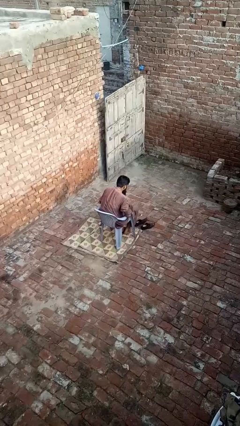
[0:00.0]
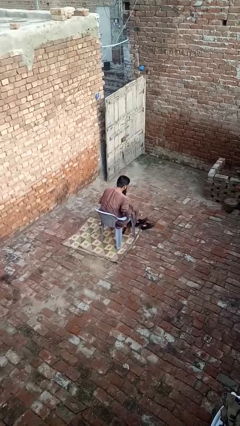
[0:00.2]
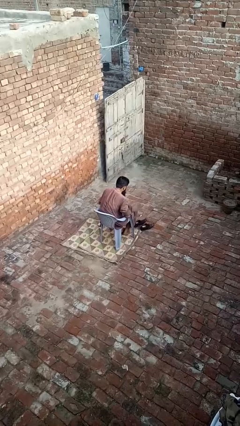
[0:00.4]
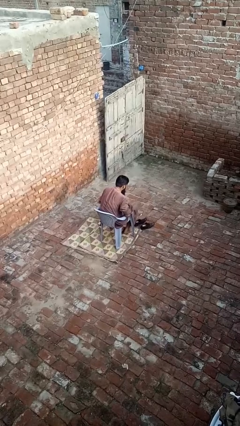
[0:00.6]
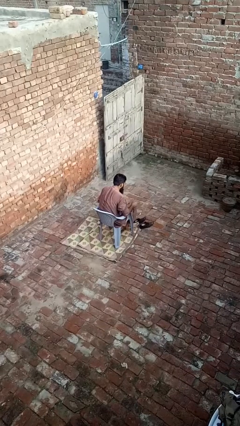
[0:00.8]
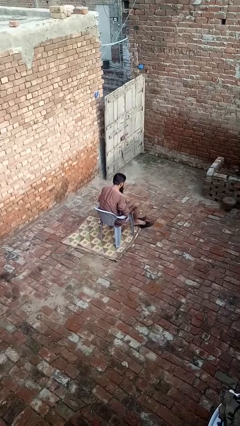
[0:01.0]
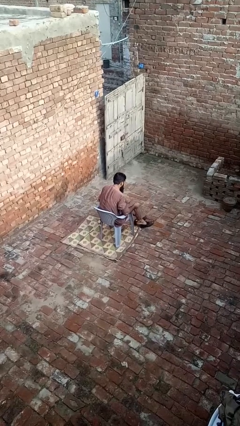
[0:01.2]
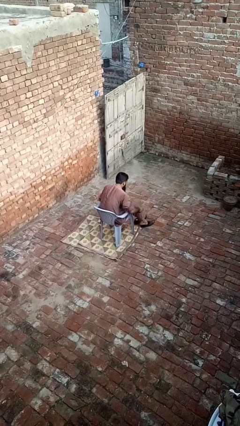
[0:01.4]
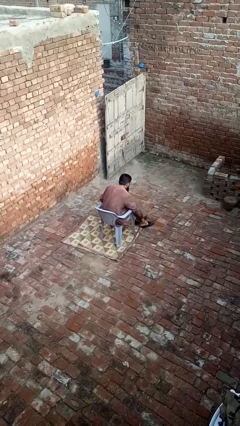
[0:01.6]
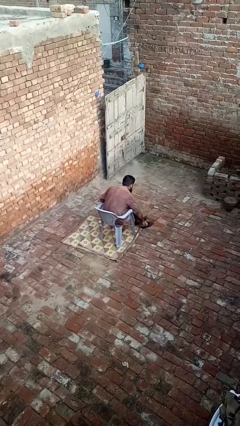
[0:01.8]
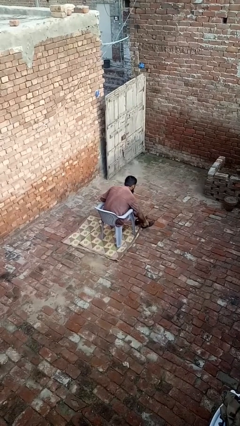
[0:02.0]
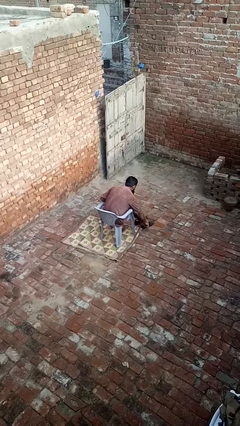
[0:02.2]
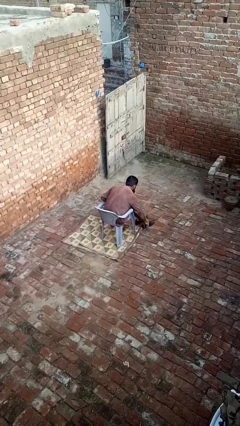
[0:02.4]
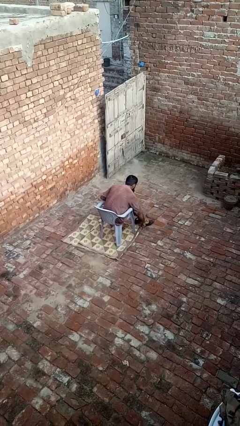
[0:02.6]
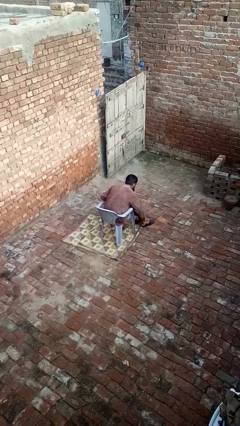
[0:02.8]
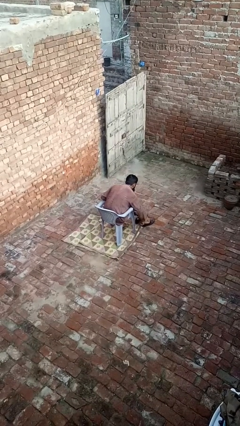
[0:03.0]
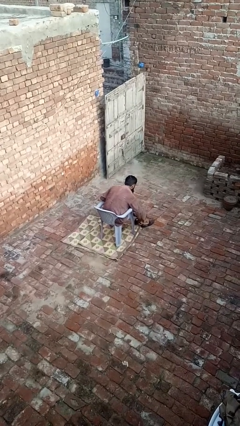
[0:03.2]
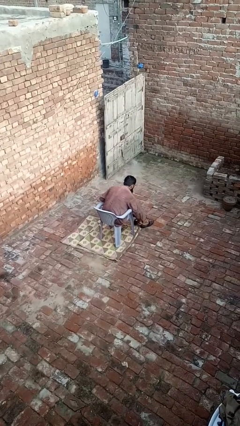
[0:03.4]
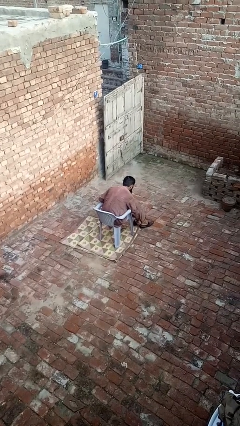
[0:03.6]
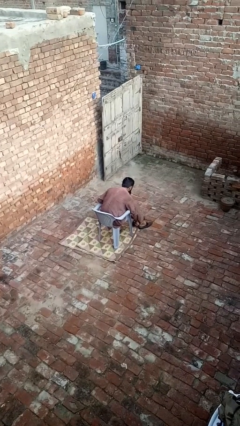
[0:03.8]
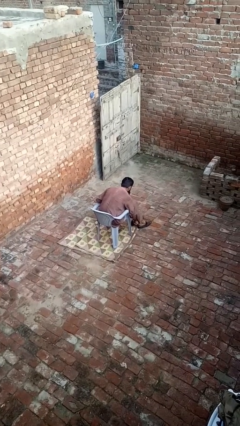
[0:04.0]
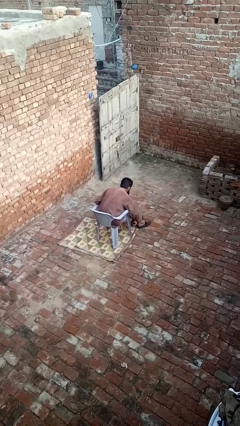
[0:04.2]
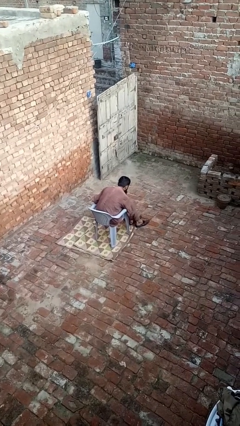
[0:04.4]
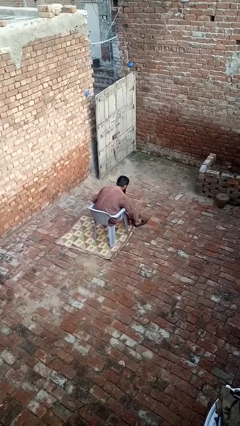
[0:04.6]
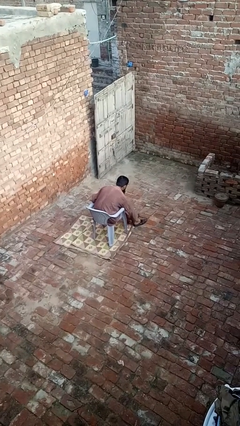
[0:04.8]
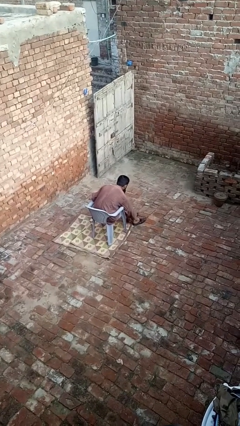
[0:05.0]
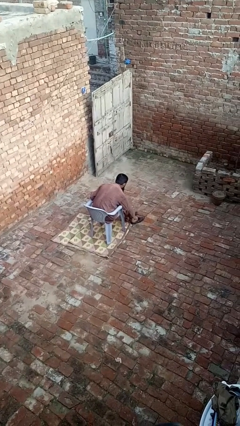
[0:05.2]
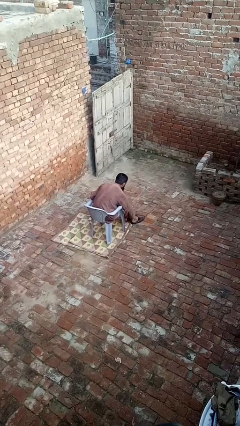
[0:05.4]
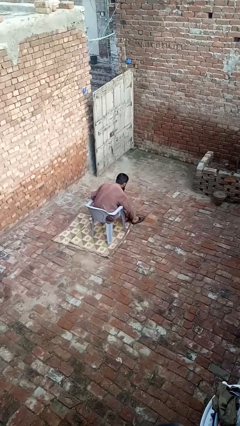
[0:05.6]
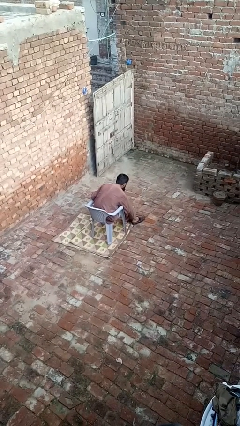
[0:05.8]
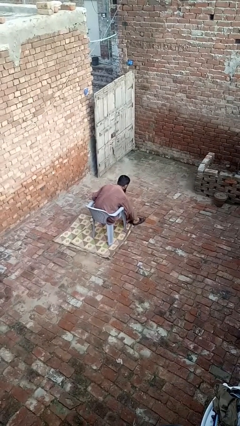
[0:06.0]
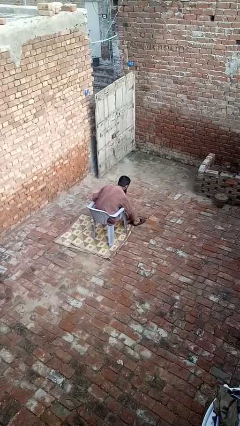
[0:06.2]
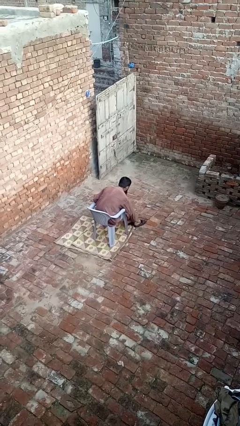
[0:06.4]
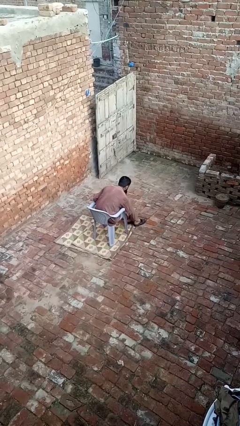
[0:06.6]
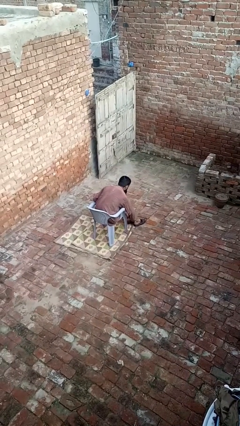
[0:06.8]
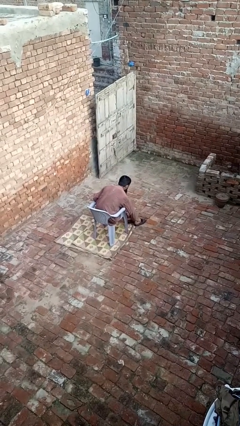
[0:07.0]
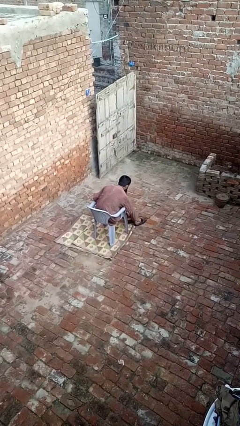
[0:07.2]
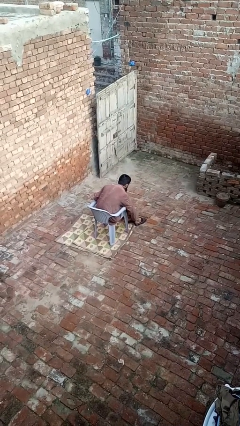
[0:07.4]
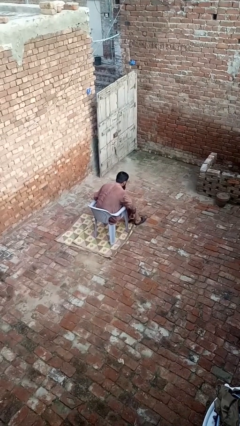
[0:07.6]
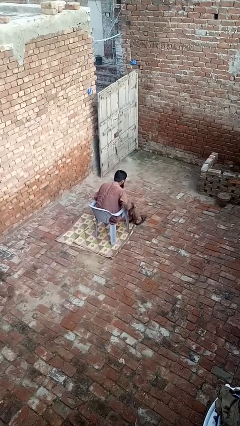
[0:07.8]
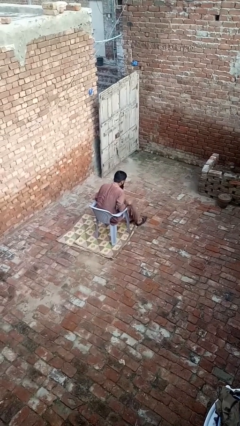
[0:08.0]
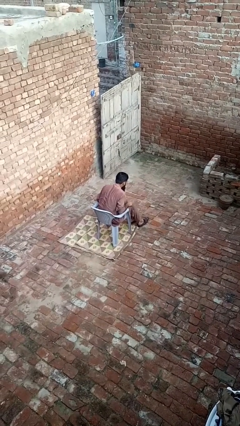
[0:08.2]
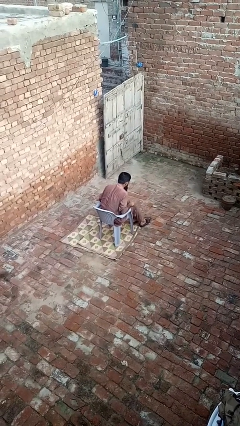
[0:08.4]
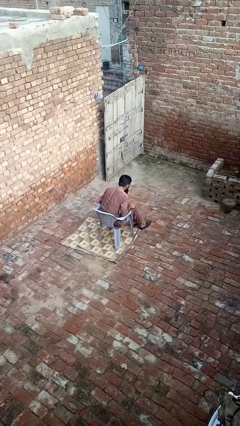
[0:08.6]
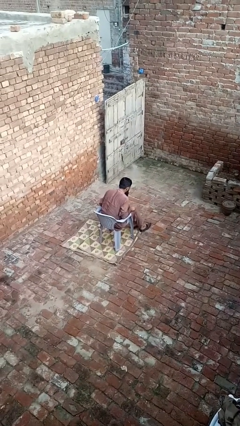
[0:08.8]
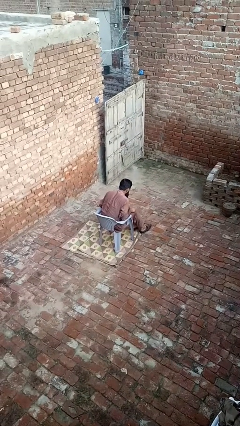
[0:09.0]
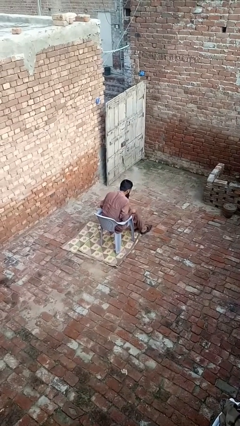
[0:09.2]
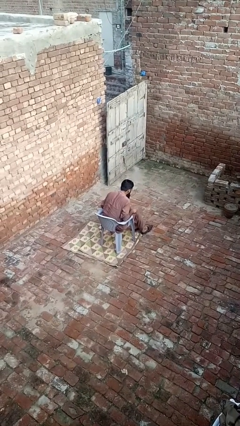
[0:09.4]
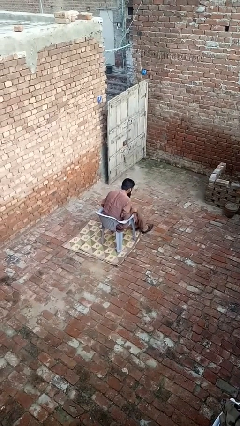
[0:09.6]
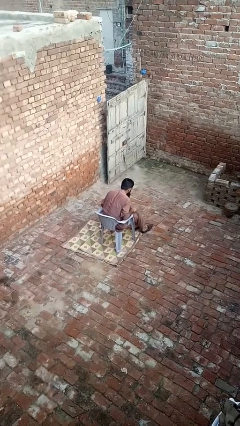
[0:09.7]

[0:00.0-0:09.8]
person puts on shoes

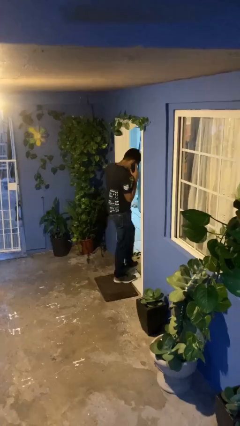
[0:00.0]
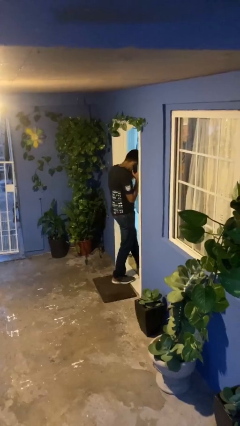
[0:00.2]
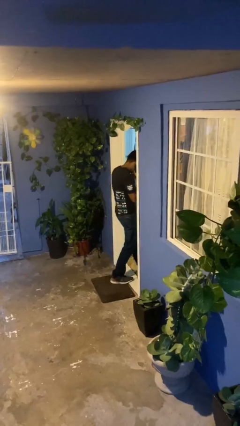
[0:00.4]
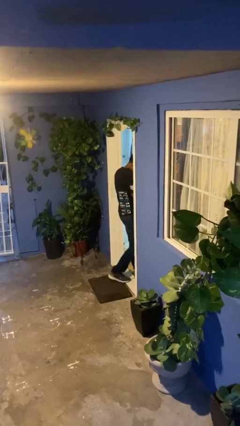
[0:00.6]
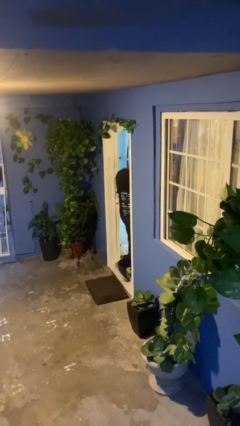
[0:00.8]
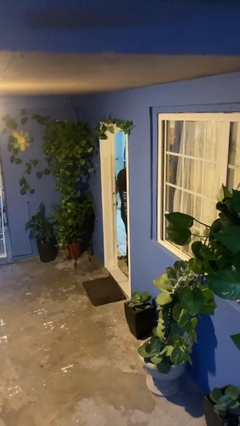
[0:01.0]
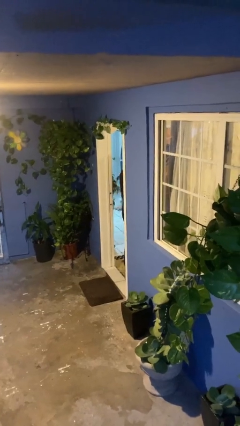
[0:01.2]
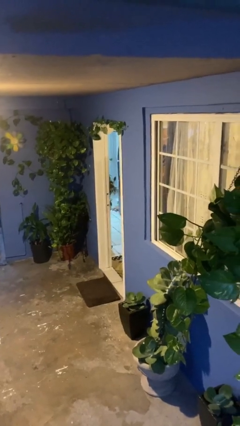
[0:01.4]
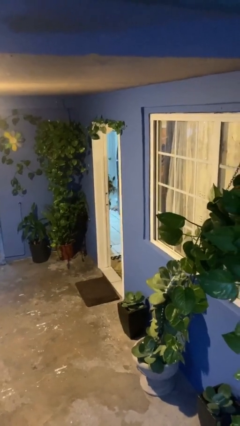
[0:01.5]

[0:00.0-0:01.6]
person exits scene through structure

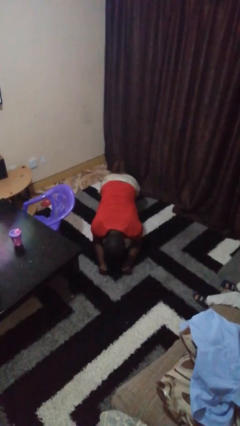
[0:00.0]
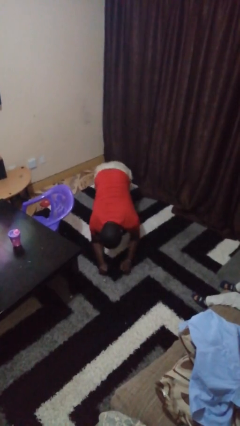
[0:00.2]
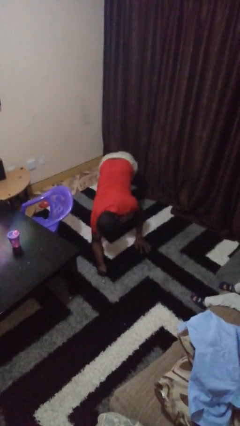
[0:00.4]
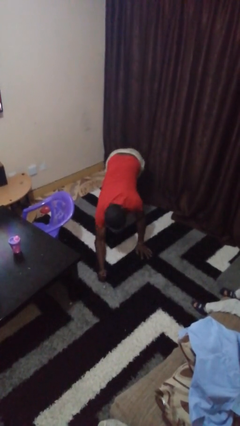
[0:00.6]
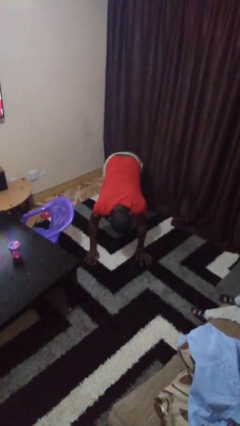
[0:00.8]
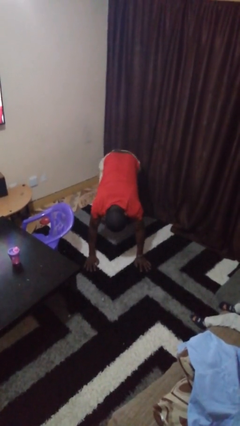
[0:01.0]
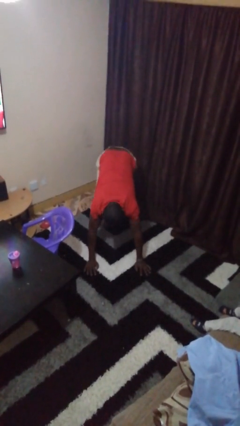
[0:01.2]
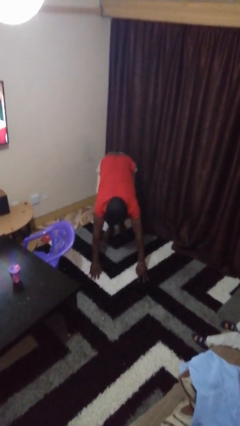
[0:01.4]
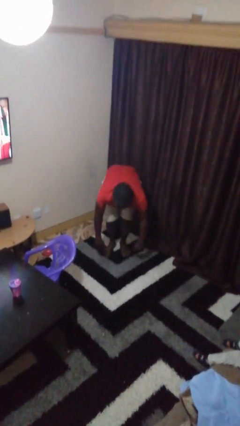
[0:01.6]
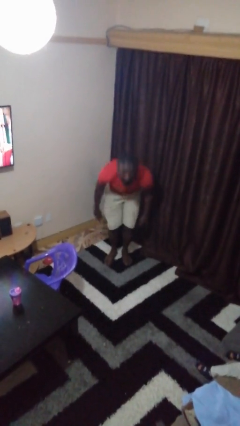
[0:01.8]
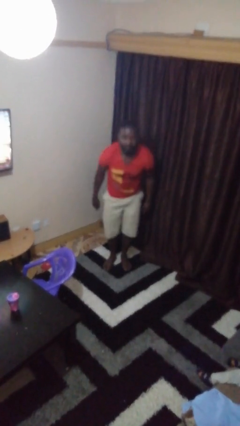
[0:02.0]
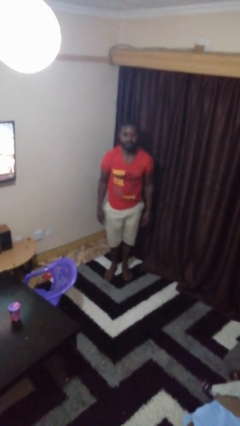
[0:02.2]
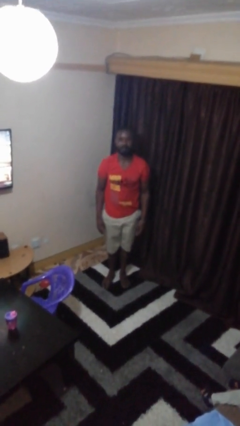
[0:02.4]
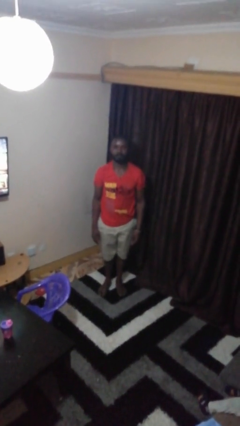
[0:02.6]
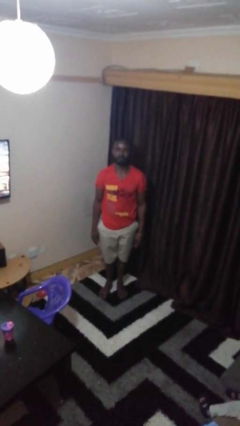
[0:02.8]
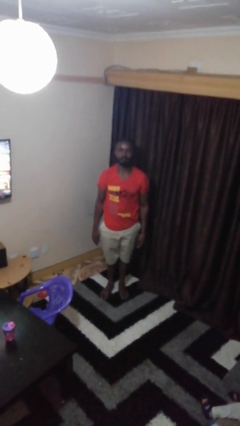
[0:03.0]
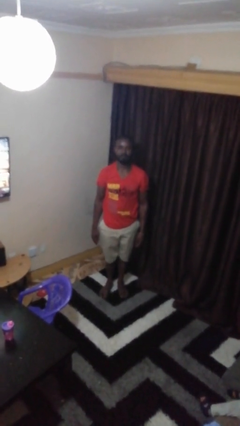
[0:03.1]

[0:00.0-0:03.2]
person stands up from floor

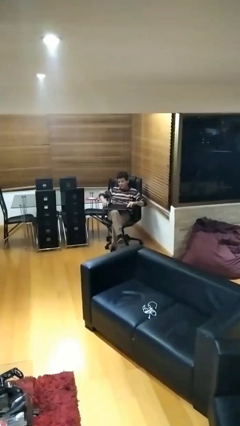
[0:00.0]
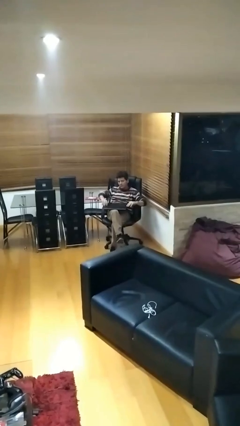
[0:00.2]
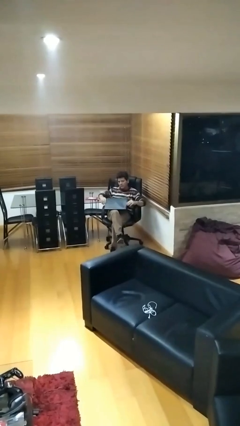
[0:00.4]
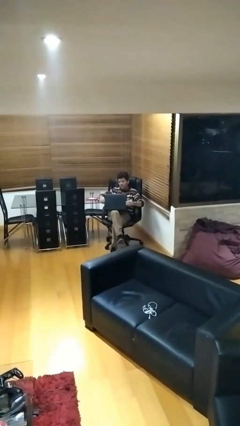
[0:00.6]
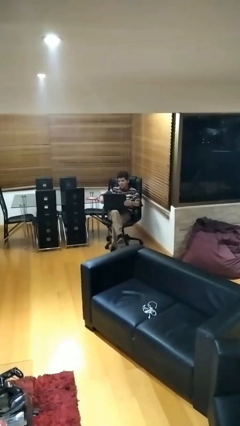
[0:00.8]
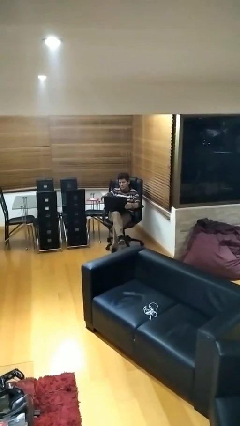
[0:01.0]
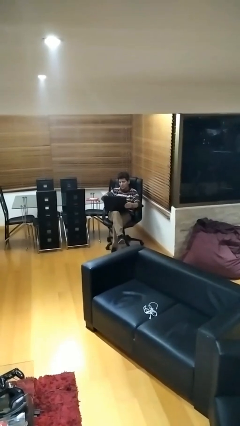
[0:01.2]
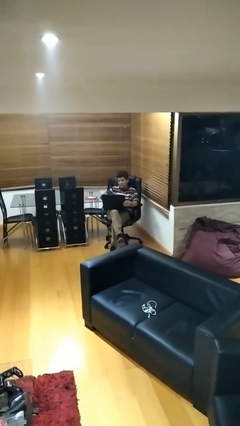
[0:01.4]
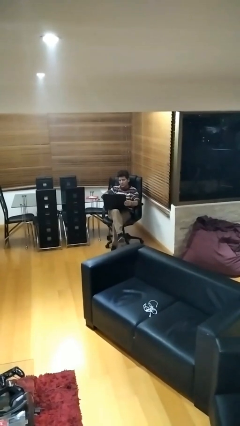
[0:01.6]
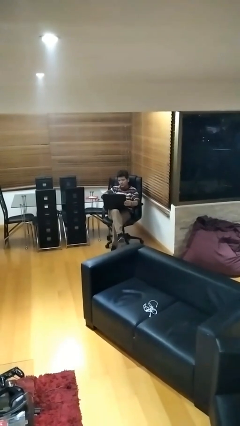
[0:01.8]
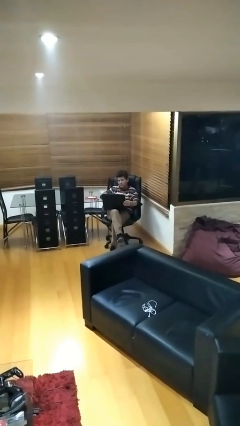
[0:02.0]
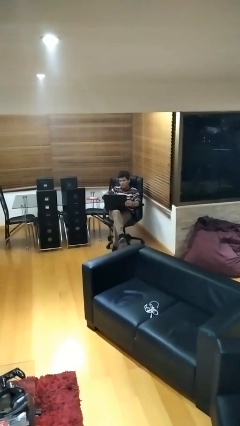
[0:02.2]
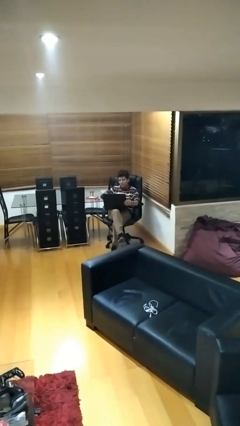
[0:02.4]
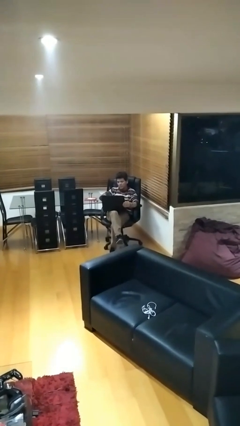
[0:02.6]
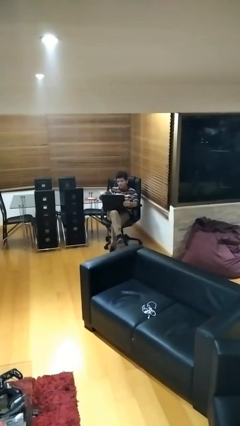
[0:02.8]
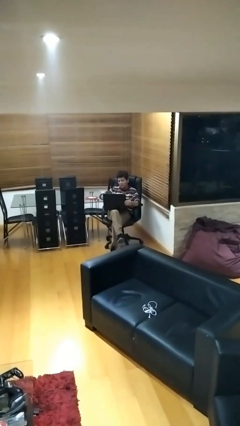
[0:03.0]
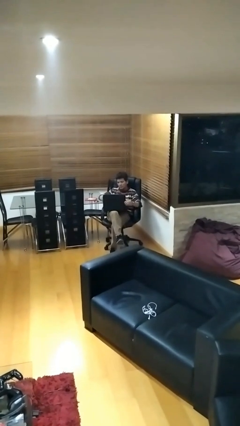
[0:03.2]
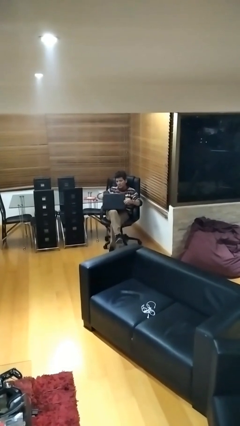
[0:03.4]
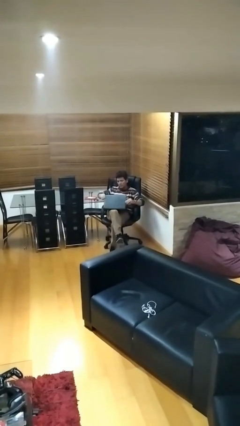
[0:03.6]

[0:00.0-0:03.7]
person interacts with laptop
